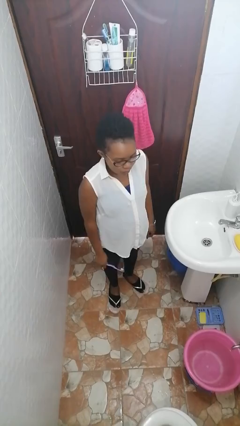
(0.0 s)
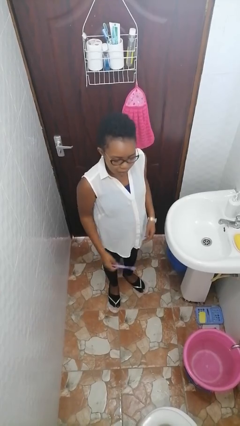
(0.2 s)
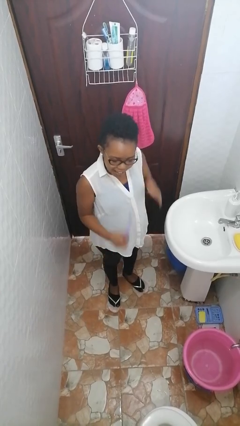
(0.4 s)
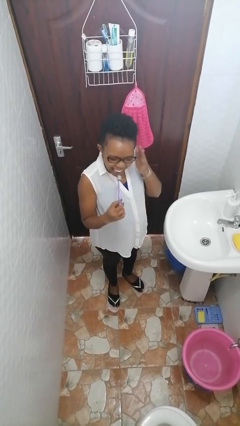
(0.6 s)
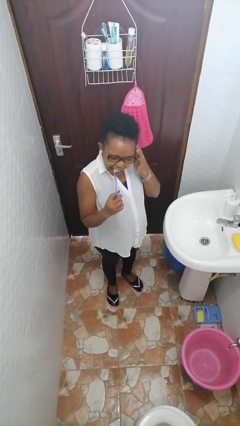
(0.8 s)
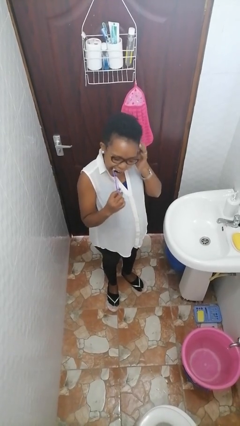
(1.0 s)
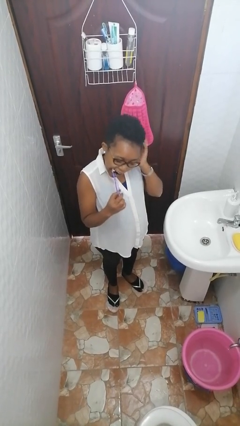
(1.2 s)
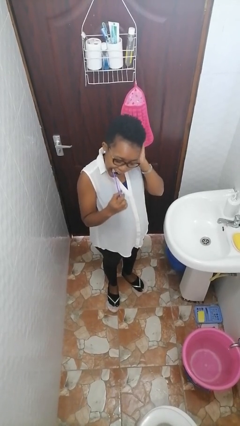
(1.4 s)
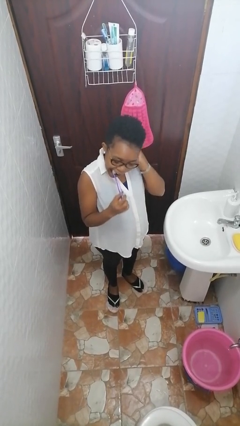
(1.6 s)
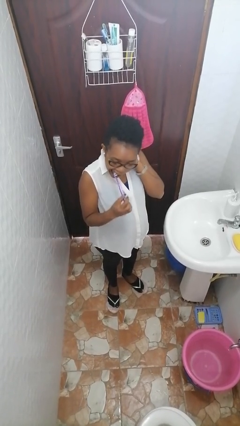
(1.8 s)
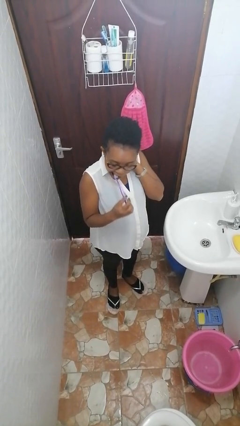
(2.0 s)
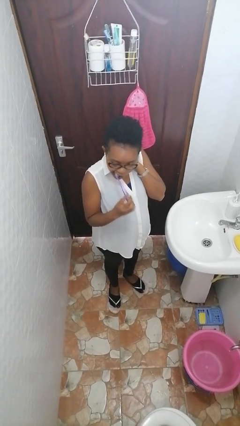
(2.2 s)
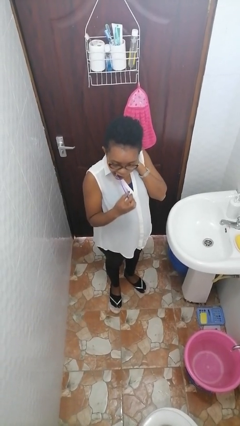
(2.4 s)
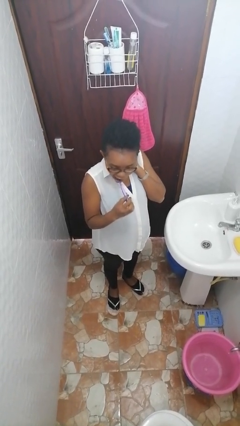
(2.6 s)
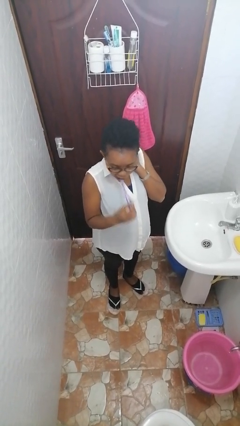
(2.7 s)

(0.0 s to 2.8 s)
person brushes teeth

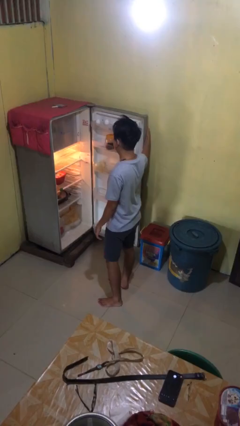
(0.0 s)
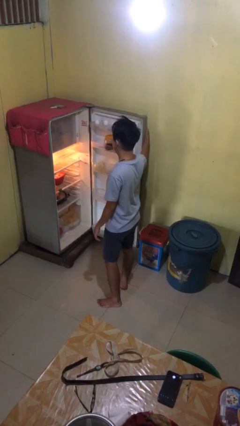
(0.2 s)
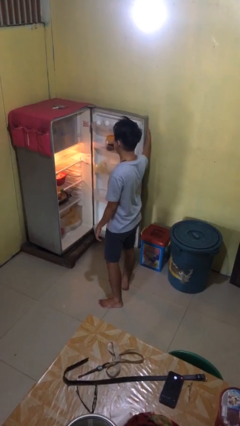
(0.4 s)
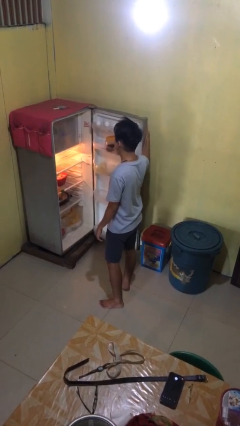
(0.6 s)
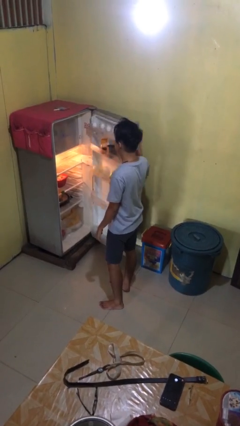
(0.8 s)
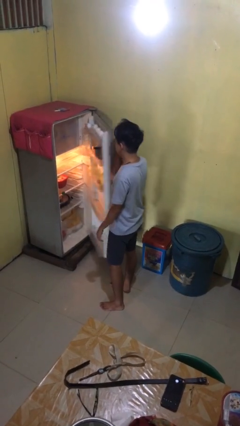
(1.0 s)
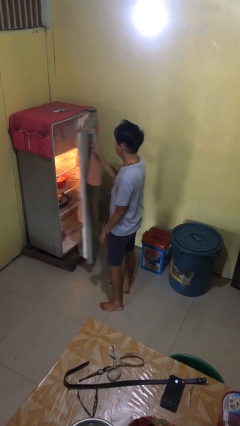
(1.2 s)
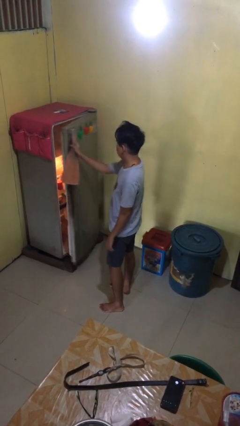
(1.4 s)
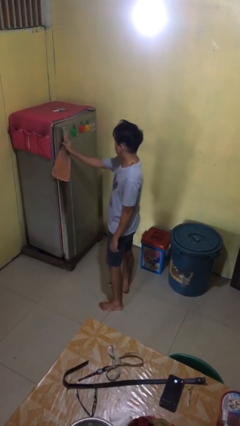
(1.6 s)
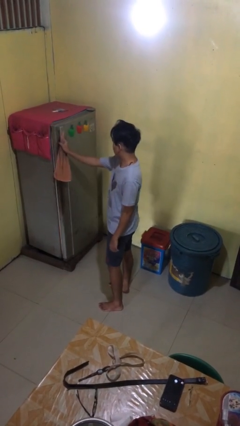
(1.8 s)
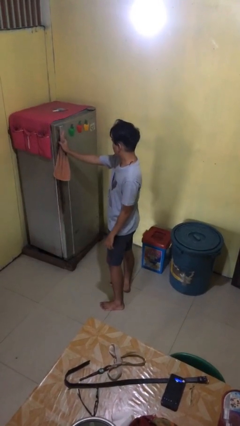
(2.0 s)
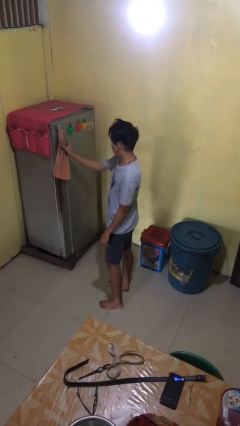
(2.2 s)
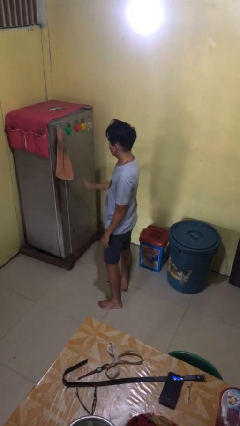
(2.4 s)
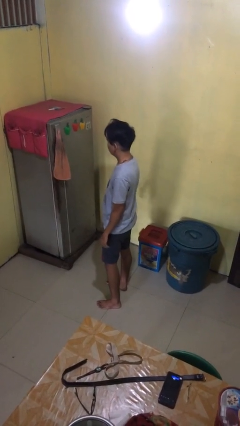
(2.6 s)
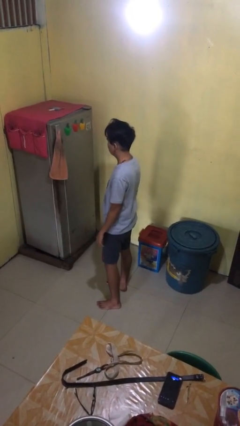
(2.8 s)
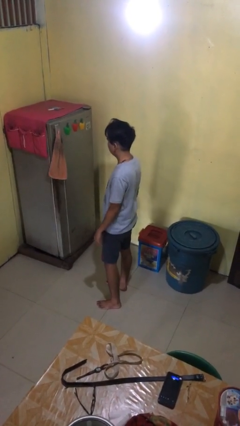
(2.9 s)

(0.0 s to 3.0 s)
person closes refrigerator

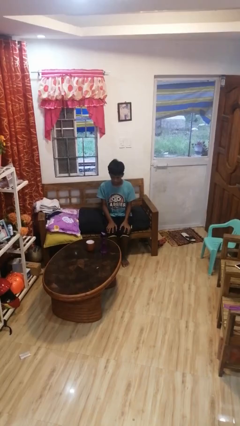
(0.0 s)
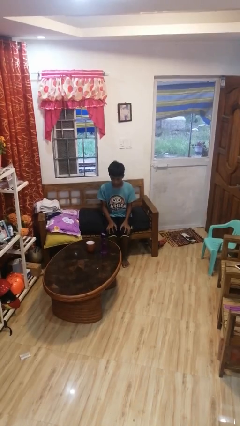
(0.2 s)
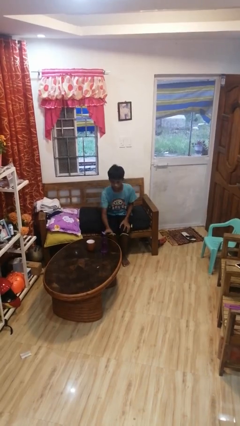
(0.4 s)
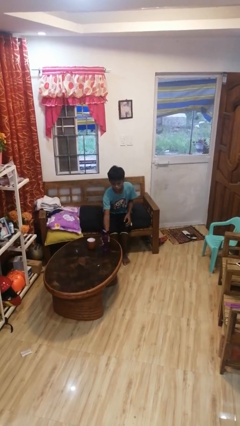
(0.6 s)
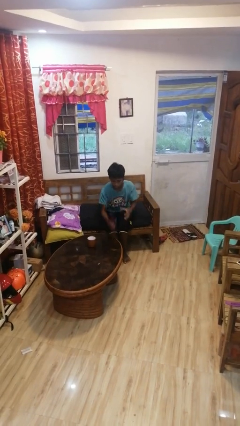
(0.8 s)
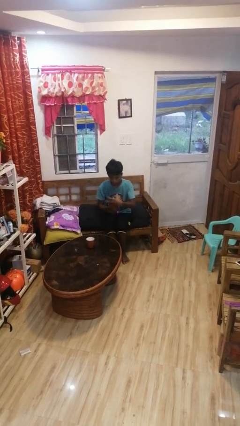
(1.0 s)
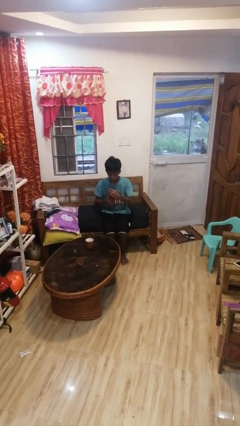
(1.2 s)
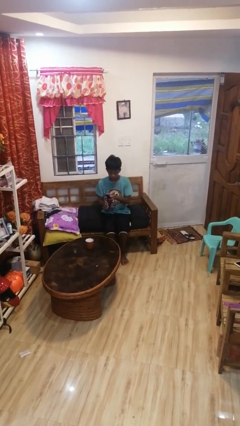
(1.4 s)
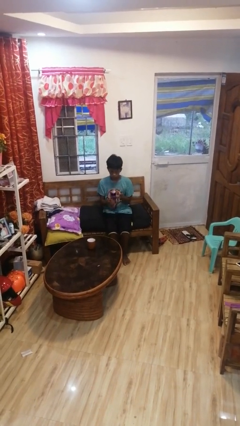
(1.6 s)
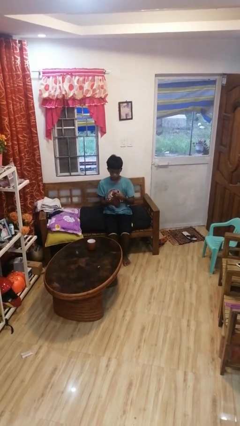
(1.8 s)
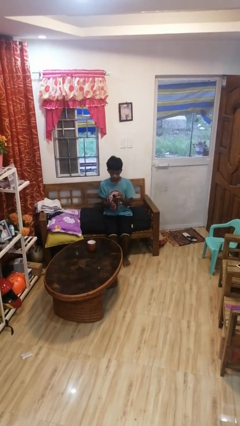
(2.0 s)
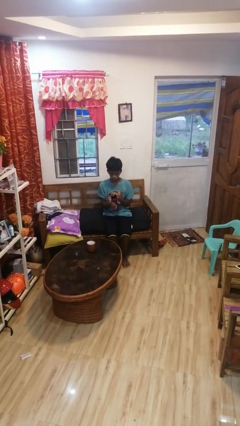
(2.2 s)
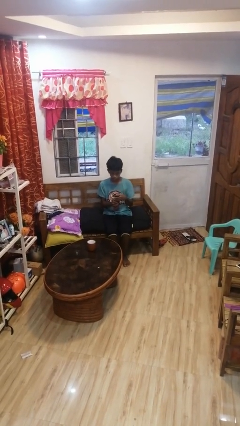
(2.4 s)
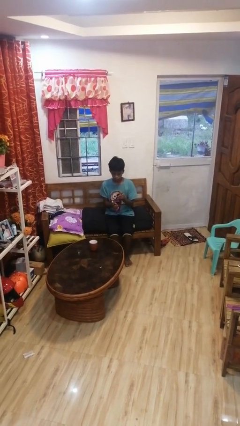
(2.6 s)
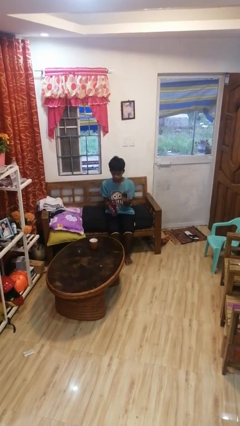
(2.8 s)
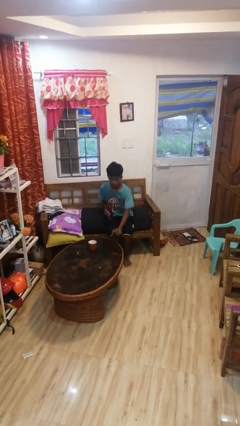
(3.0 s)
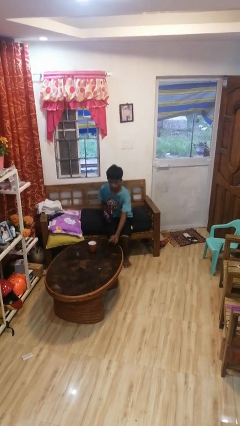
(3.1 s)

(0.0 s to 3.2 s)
person unscrews lid from bottle

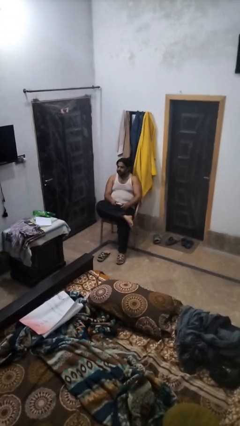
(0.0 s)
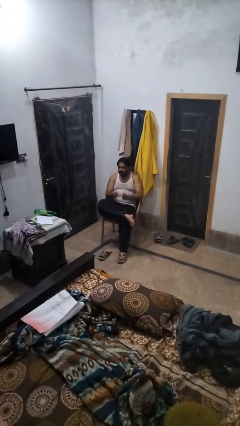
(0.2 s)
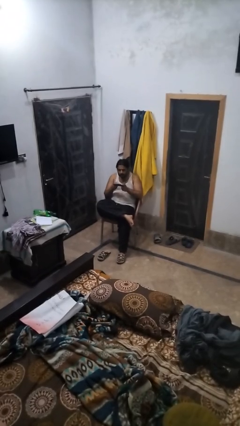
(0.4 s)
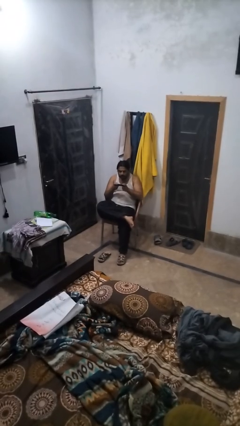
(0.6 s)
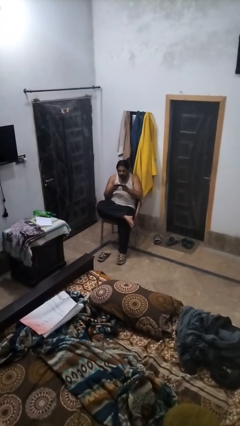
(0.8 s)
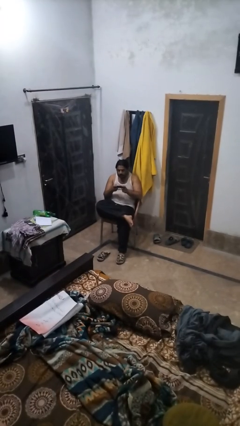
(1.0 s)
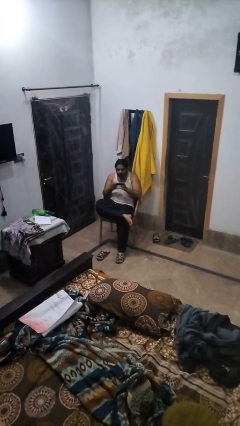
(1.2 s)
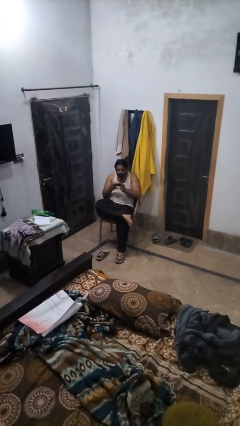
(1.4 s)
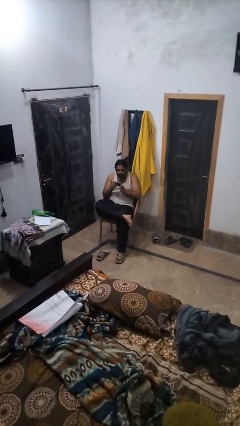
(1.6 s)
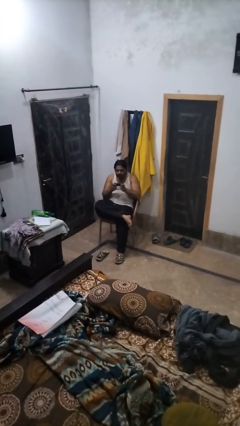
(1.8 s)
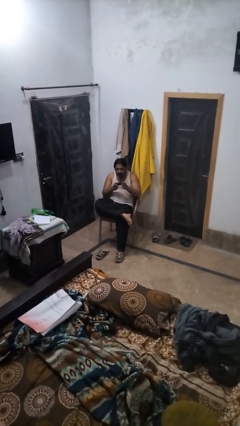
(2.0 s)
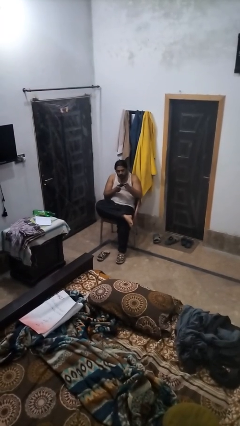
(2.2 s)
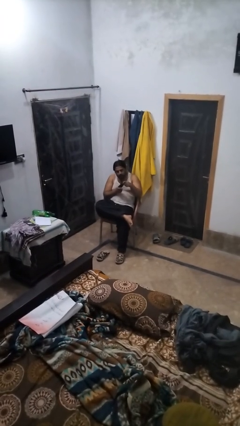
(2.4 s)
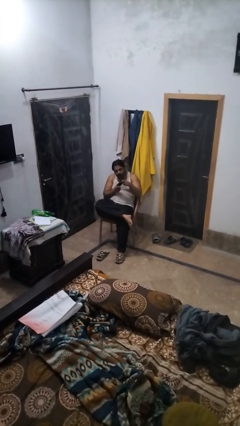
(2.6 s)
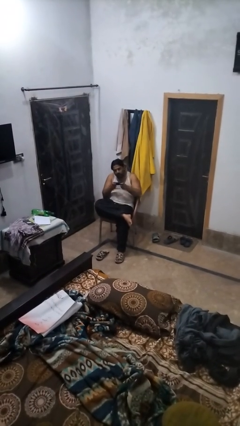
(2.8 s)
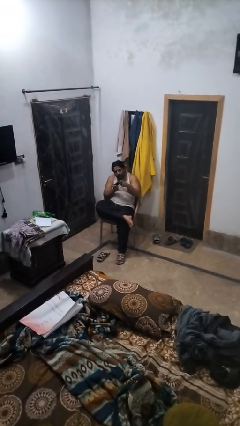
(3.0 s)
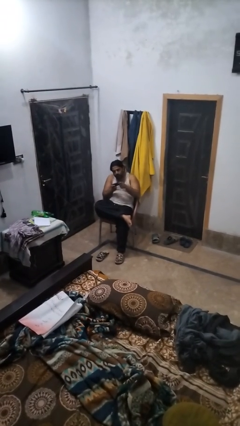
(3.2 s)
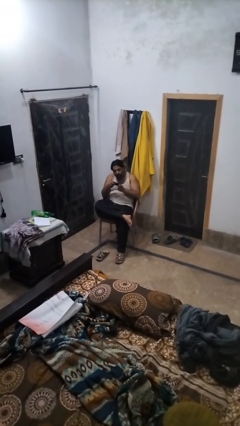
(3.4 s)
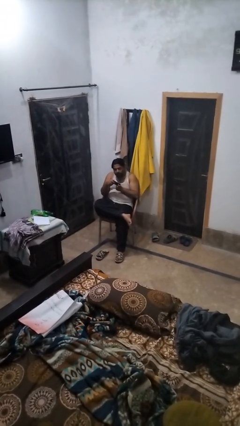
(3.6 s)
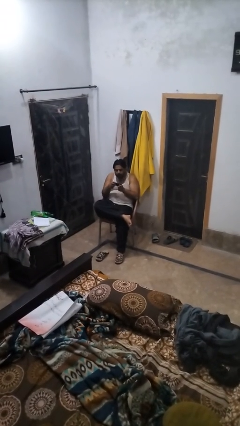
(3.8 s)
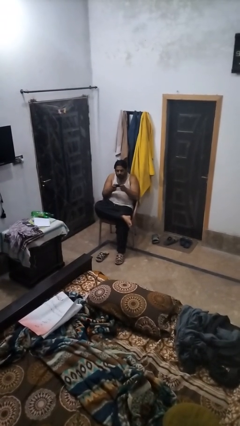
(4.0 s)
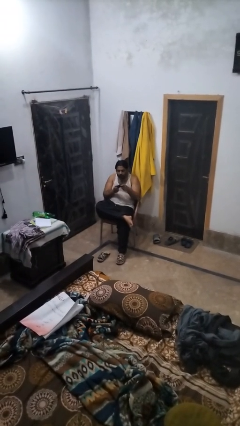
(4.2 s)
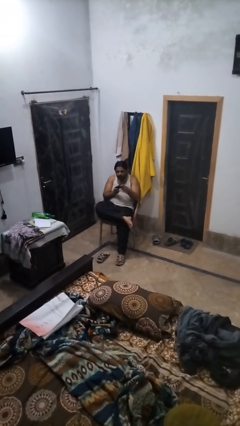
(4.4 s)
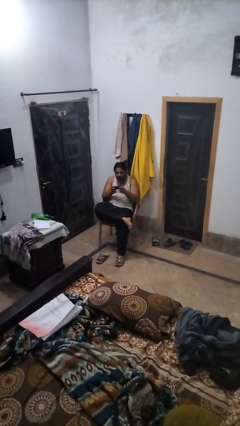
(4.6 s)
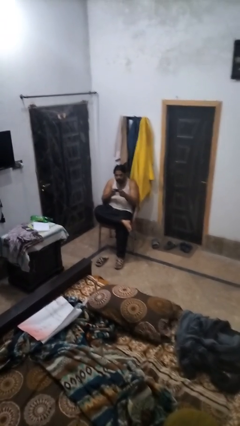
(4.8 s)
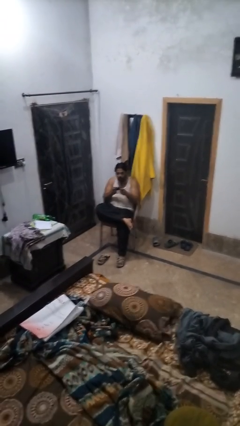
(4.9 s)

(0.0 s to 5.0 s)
person interacts with handheld game

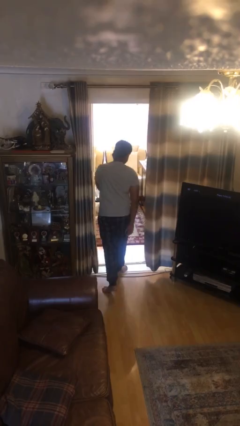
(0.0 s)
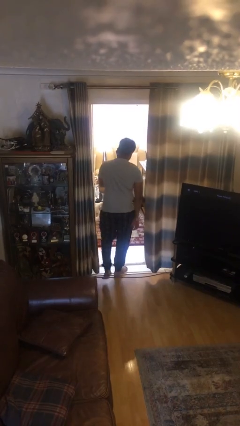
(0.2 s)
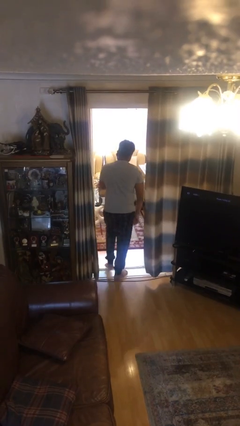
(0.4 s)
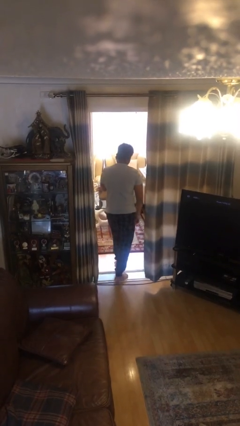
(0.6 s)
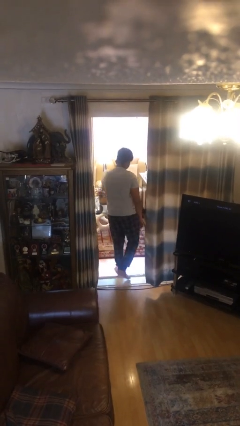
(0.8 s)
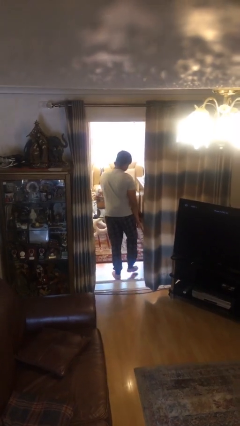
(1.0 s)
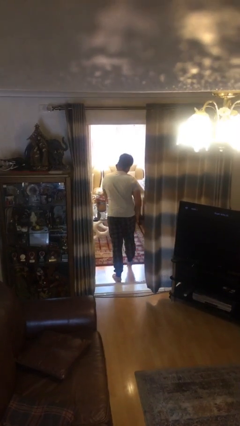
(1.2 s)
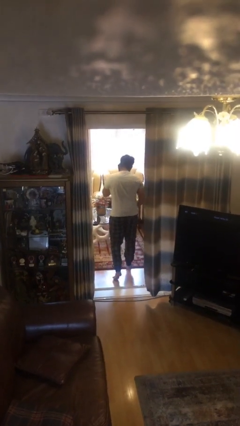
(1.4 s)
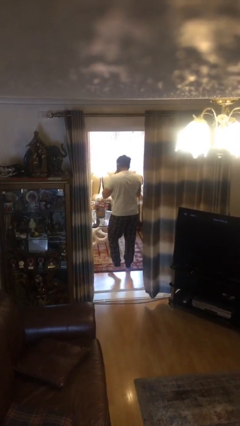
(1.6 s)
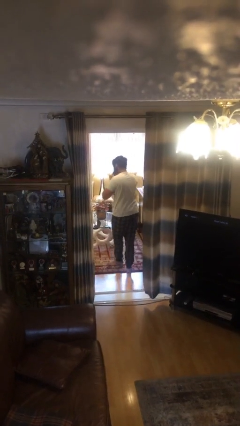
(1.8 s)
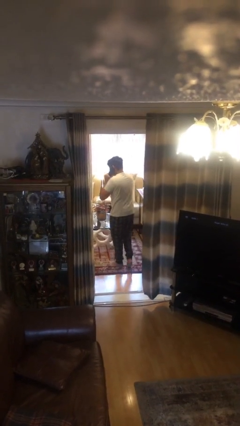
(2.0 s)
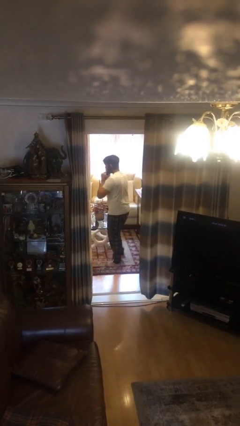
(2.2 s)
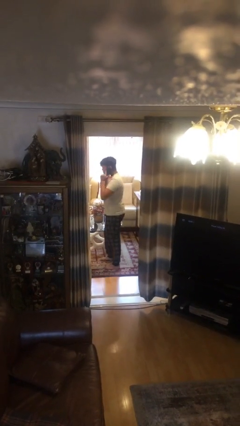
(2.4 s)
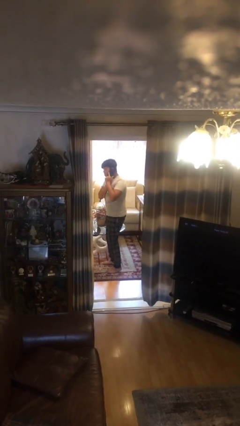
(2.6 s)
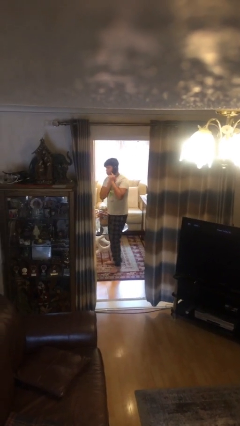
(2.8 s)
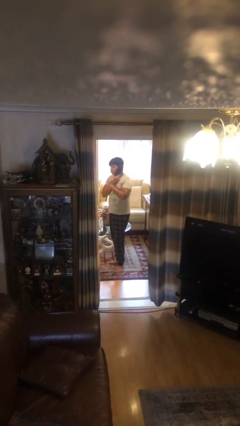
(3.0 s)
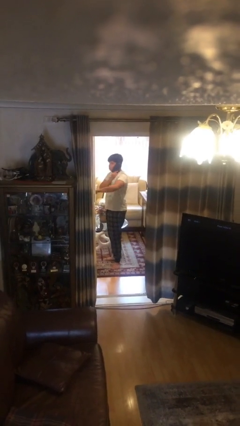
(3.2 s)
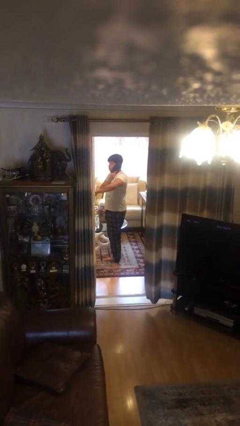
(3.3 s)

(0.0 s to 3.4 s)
person exits scene through structure

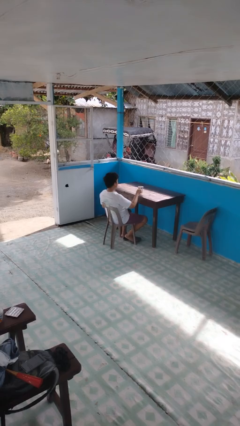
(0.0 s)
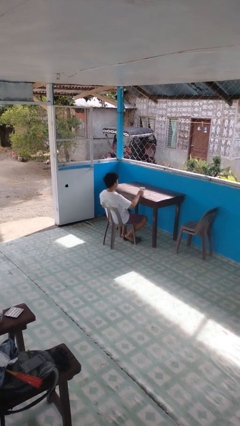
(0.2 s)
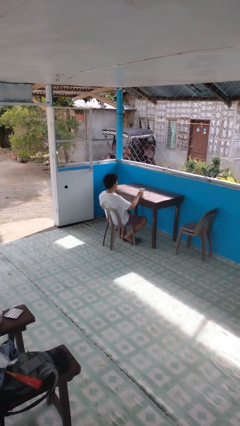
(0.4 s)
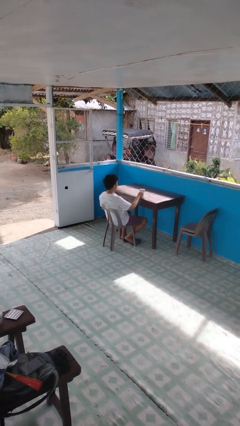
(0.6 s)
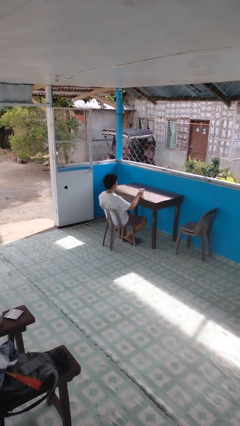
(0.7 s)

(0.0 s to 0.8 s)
person puts down object on table
